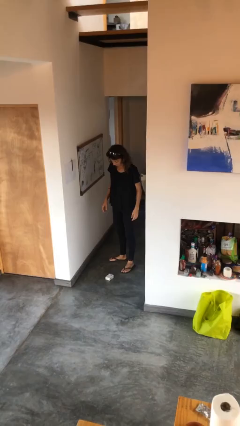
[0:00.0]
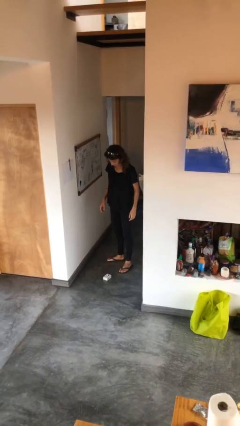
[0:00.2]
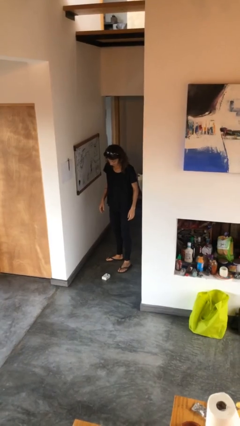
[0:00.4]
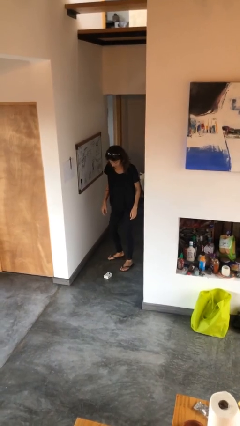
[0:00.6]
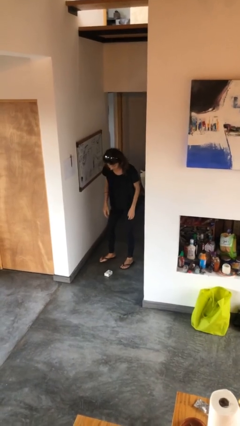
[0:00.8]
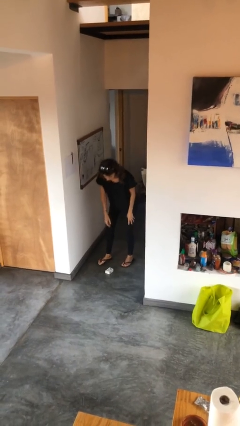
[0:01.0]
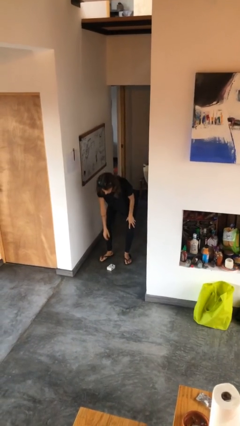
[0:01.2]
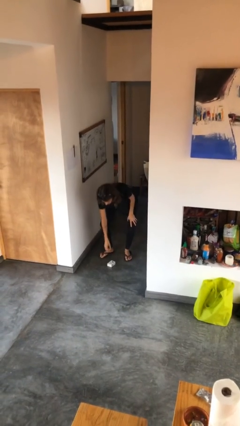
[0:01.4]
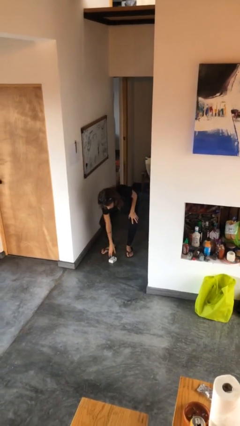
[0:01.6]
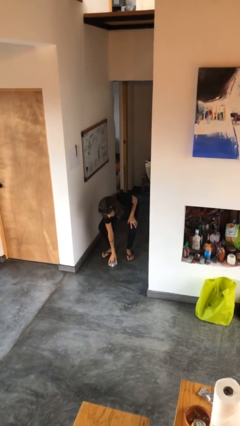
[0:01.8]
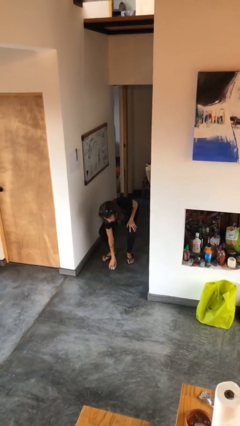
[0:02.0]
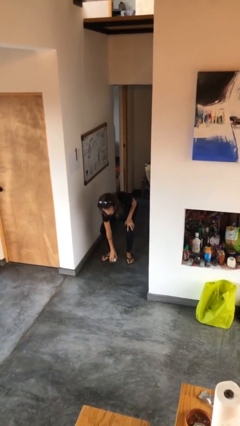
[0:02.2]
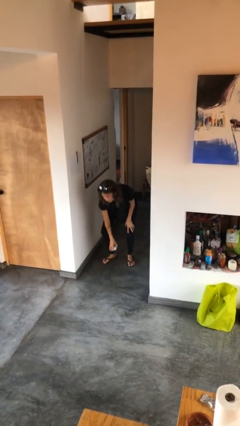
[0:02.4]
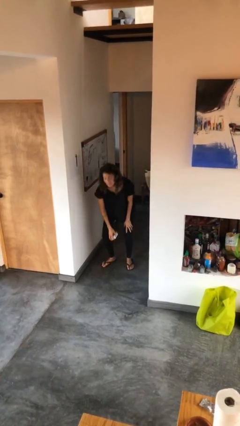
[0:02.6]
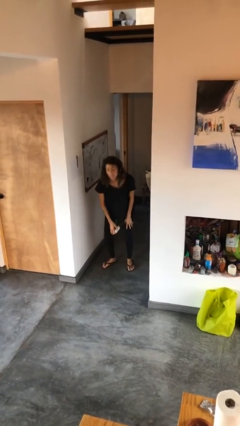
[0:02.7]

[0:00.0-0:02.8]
person picks up object from floor

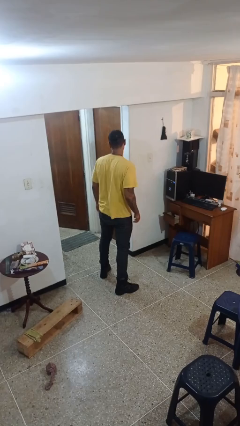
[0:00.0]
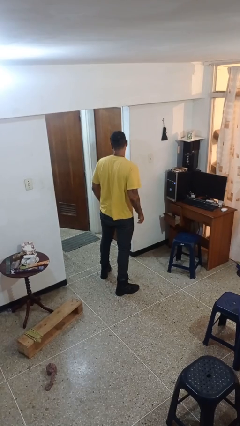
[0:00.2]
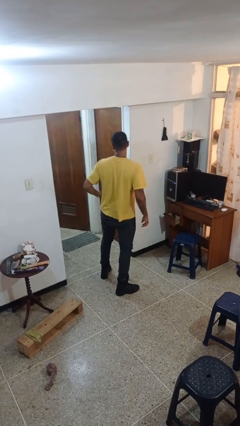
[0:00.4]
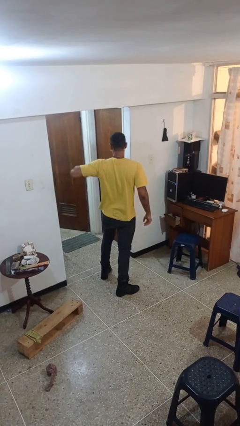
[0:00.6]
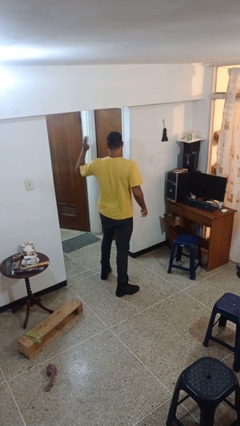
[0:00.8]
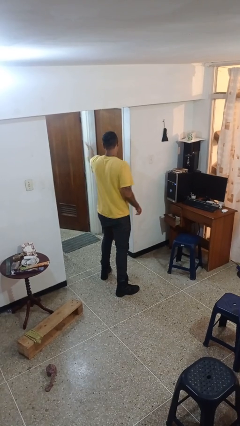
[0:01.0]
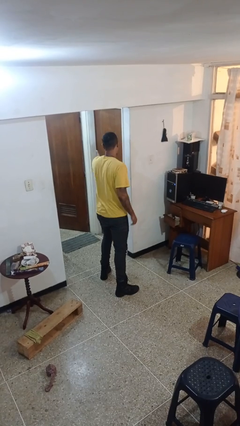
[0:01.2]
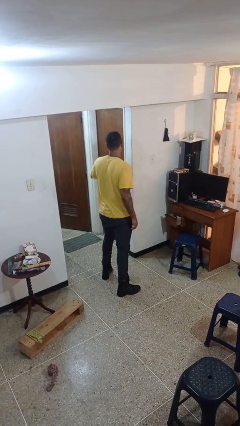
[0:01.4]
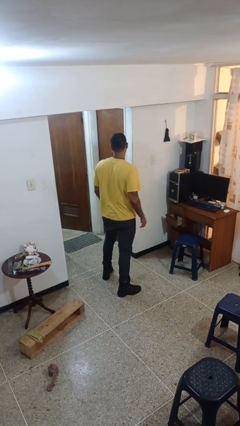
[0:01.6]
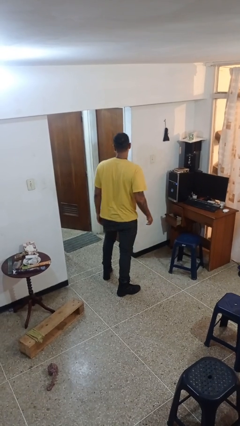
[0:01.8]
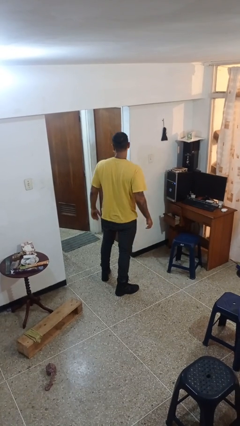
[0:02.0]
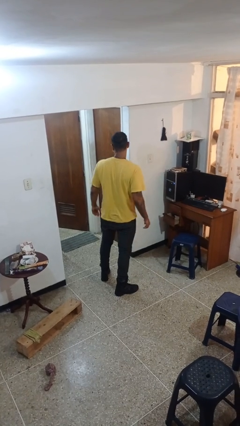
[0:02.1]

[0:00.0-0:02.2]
person karate chop

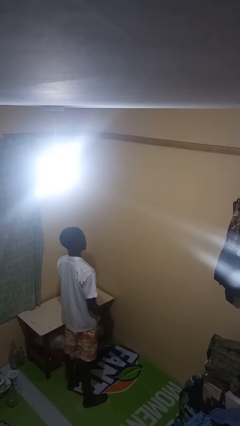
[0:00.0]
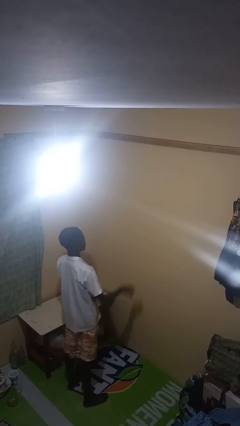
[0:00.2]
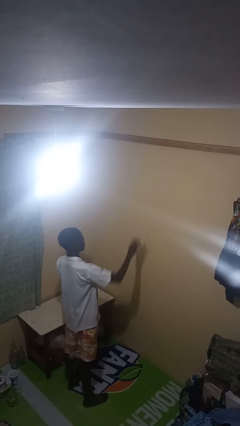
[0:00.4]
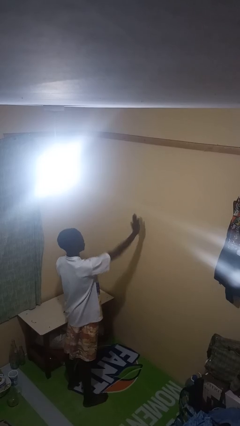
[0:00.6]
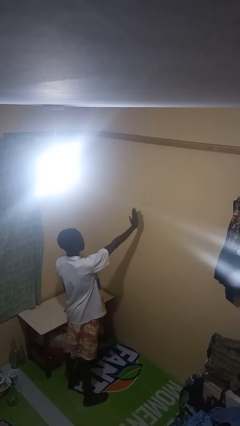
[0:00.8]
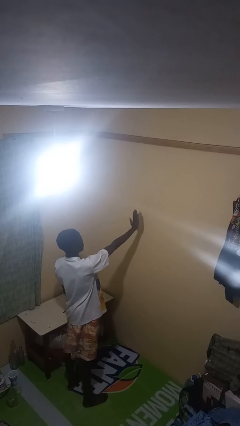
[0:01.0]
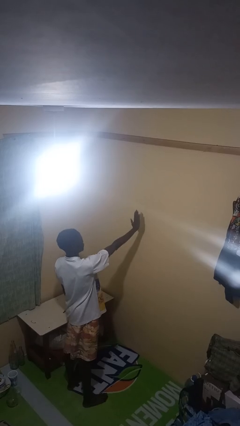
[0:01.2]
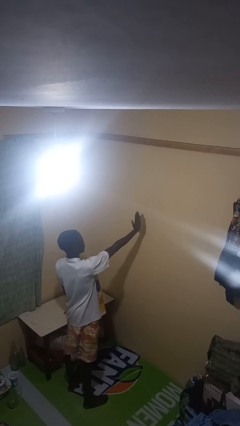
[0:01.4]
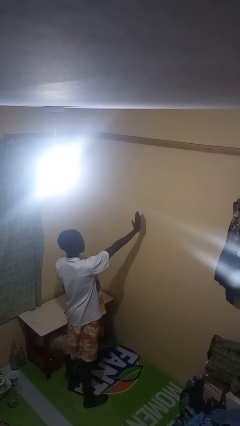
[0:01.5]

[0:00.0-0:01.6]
person gestures stop

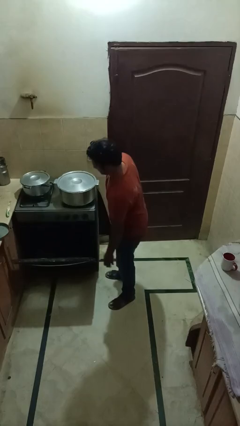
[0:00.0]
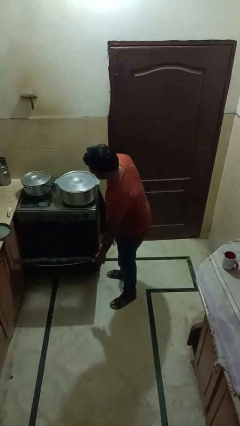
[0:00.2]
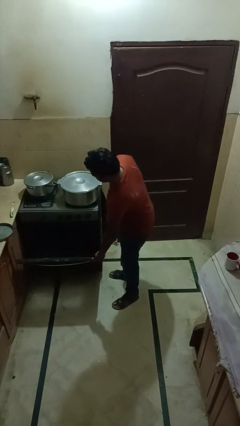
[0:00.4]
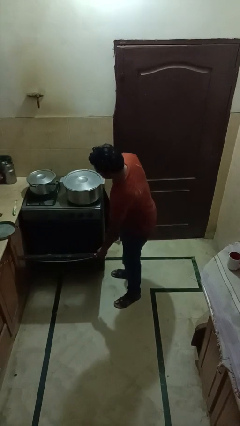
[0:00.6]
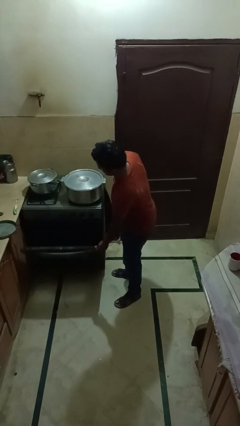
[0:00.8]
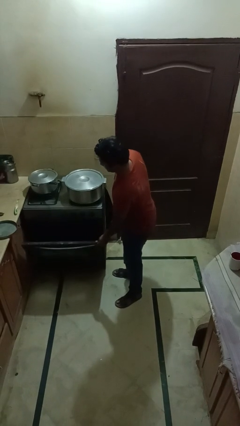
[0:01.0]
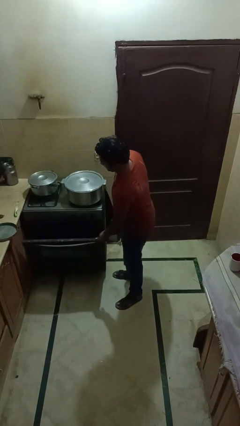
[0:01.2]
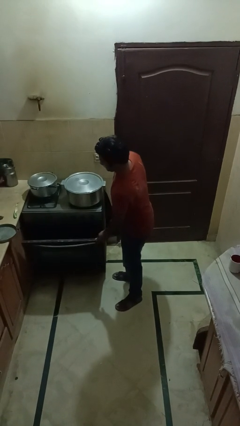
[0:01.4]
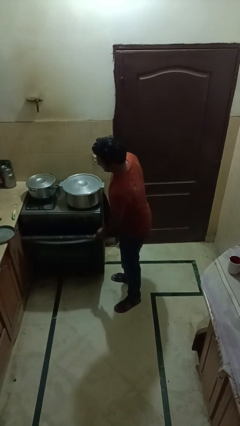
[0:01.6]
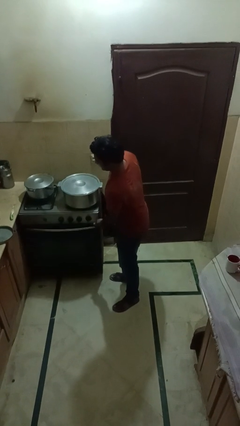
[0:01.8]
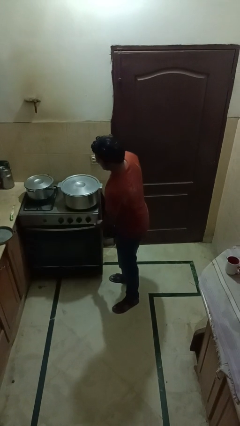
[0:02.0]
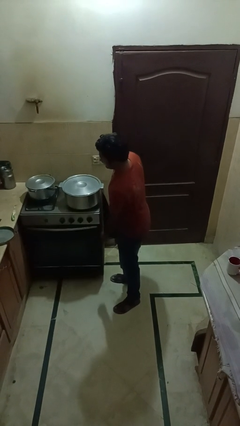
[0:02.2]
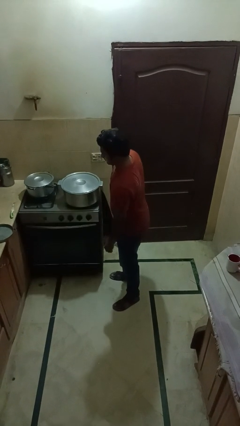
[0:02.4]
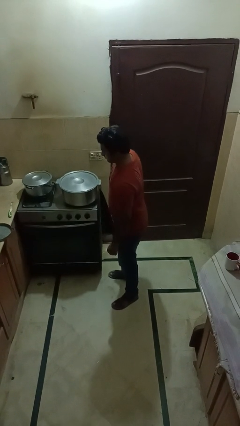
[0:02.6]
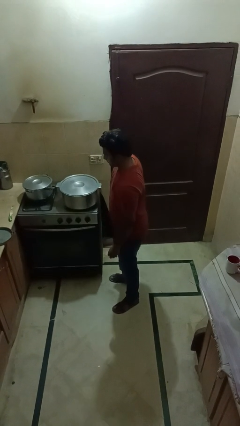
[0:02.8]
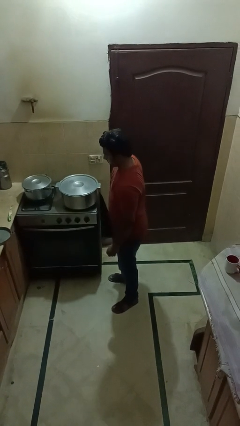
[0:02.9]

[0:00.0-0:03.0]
person closes oven door

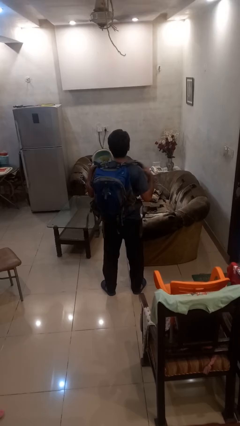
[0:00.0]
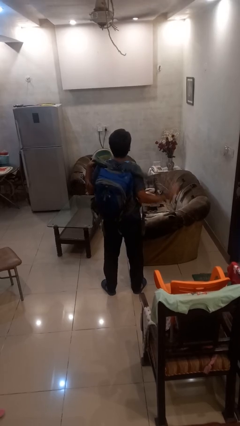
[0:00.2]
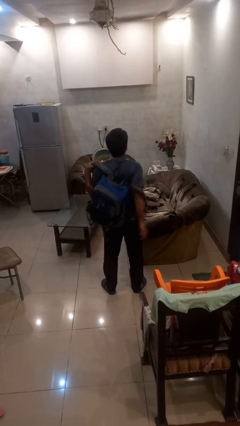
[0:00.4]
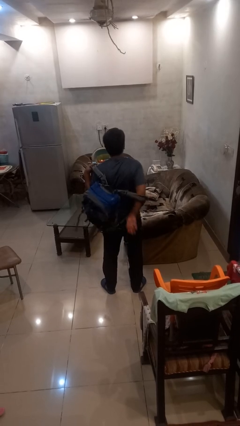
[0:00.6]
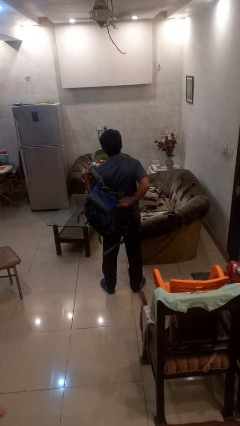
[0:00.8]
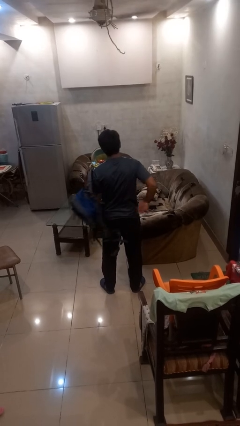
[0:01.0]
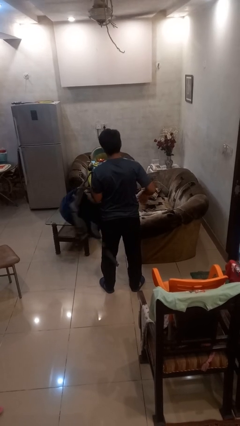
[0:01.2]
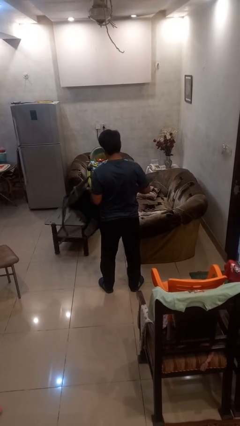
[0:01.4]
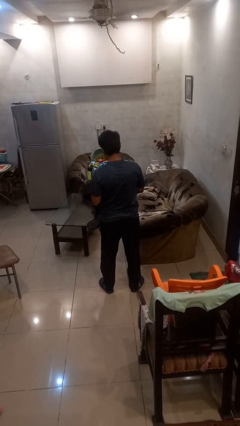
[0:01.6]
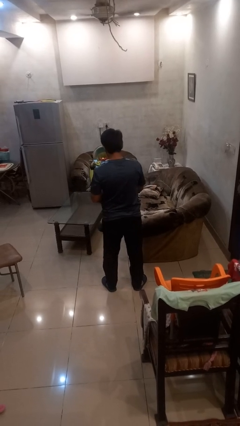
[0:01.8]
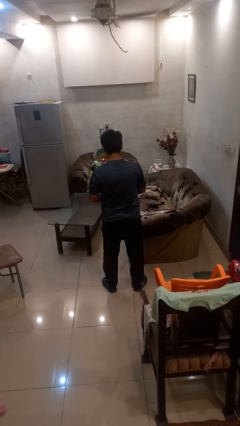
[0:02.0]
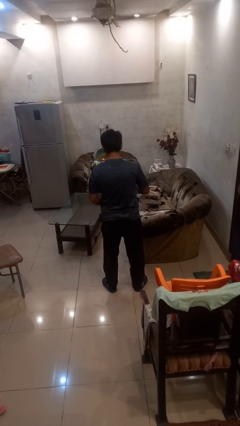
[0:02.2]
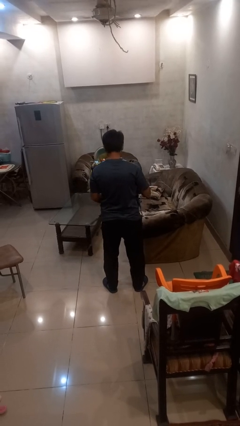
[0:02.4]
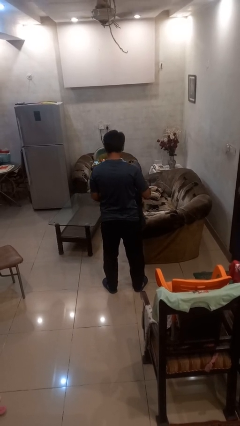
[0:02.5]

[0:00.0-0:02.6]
person takes off backpack

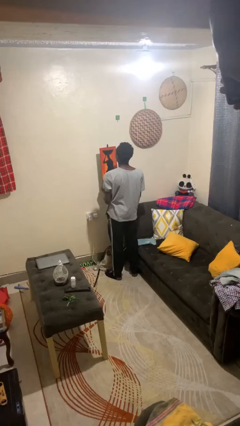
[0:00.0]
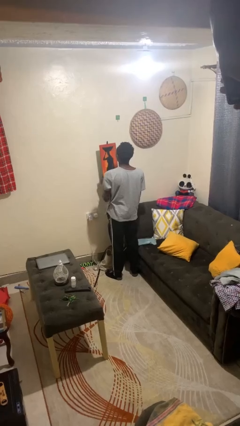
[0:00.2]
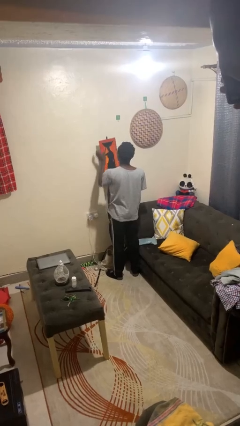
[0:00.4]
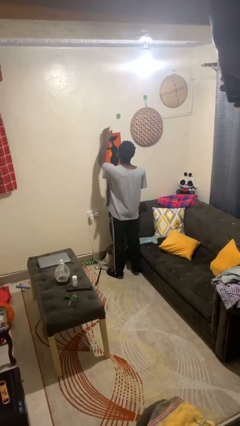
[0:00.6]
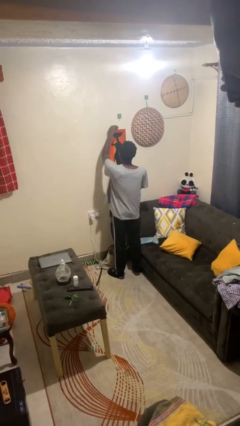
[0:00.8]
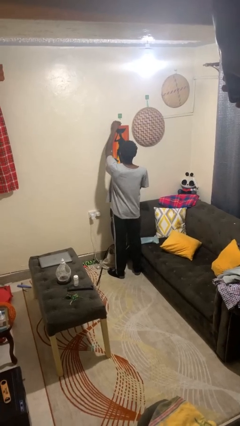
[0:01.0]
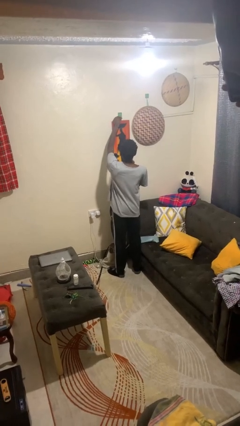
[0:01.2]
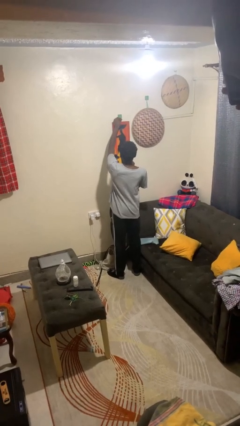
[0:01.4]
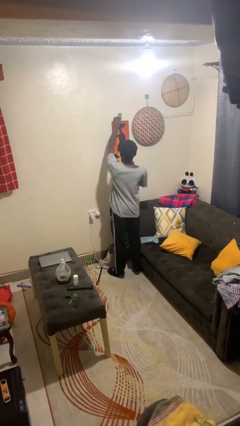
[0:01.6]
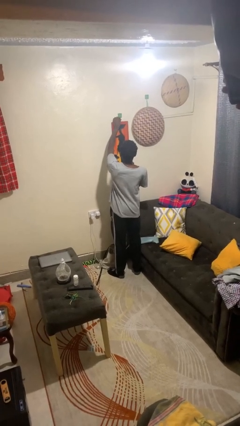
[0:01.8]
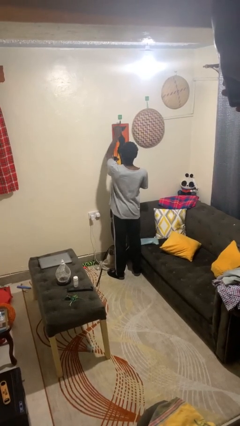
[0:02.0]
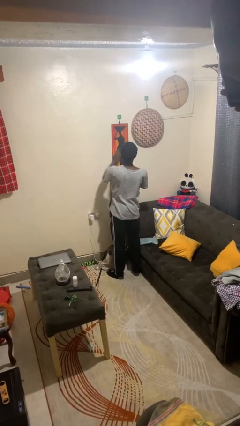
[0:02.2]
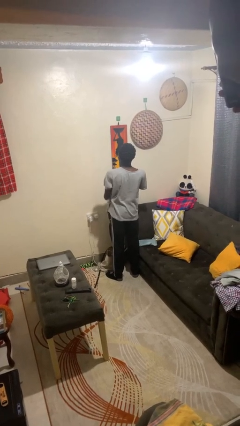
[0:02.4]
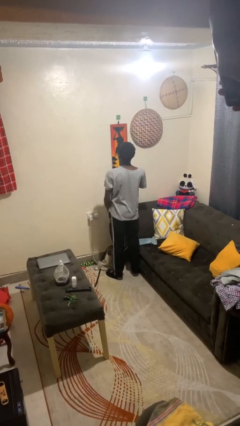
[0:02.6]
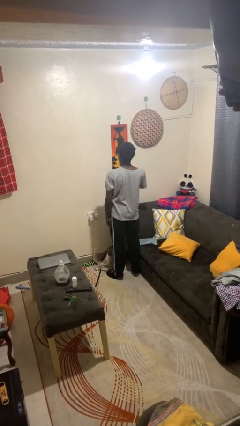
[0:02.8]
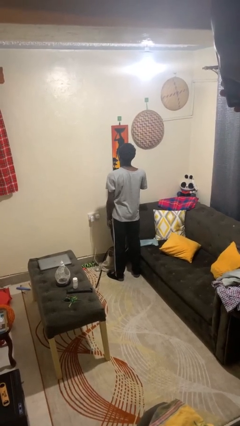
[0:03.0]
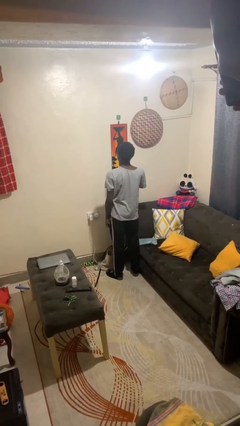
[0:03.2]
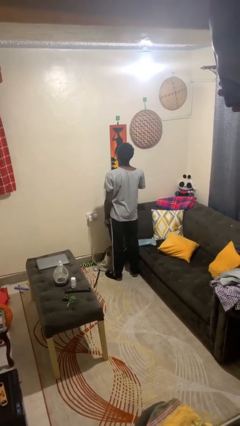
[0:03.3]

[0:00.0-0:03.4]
person puts up picture frame

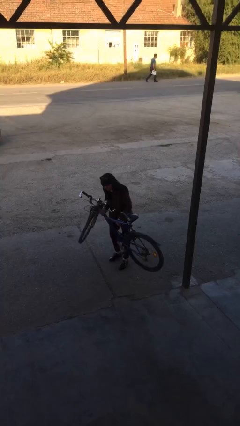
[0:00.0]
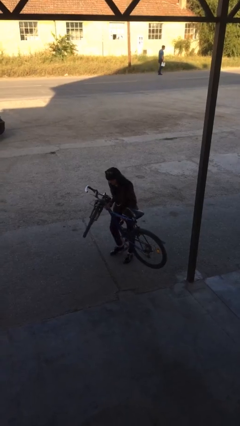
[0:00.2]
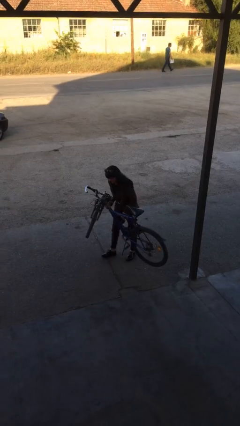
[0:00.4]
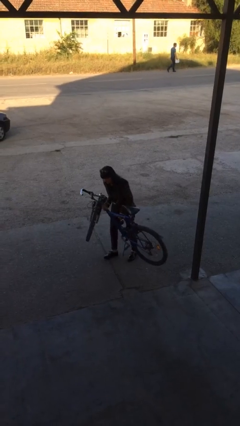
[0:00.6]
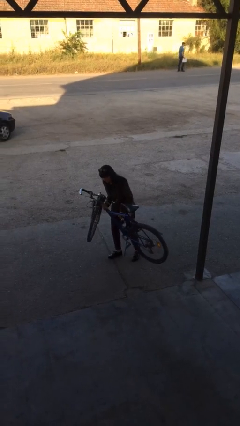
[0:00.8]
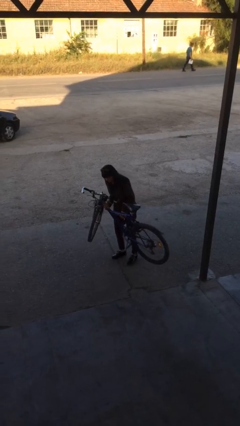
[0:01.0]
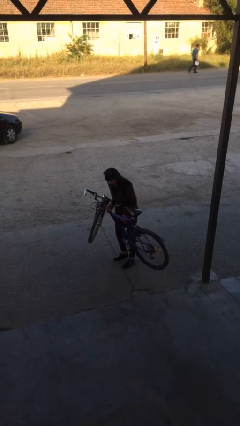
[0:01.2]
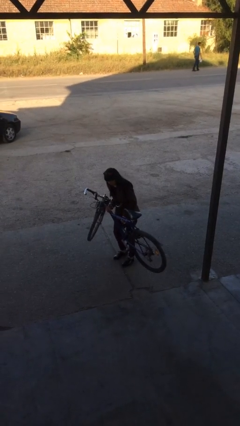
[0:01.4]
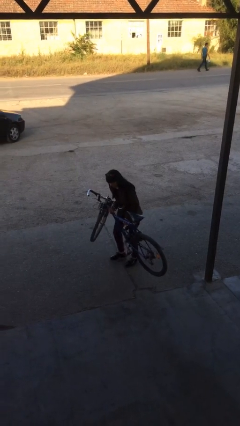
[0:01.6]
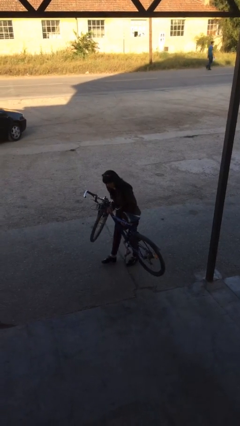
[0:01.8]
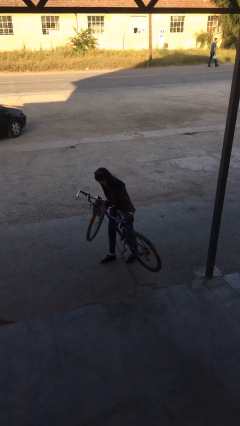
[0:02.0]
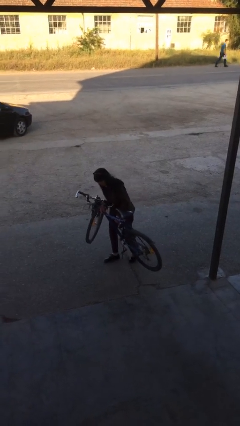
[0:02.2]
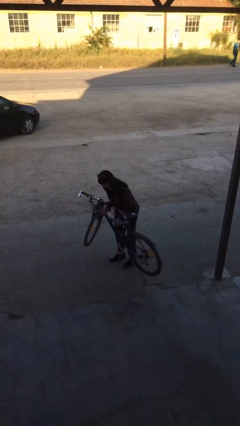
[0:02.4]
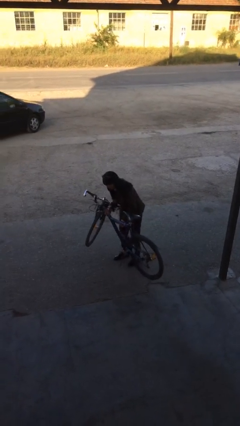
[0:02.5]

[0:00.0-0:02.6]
person carries heavy object
